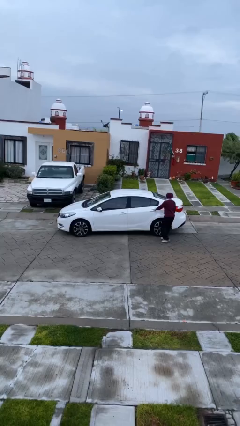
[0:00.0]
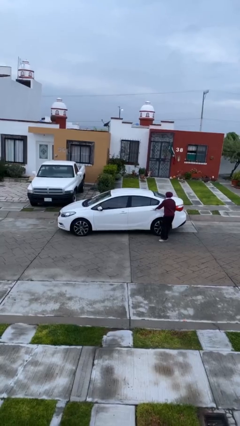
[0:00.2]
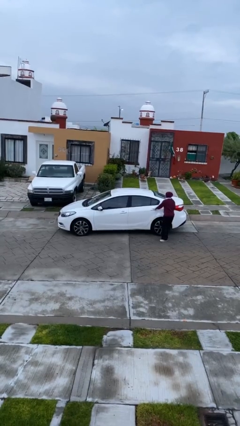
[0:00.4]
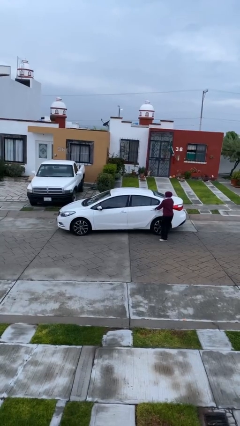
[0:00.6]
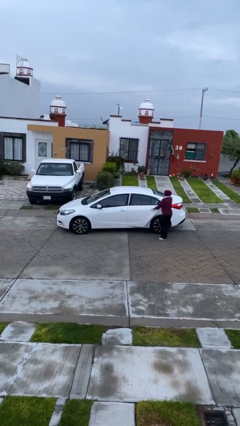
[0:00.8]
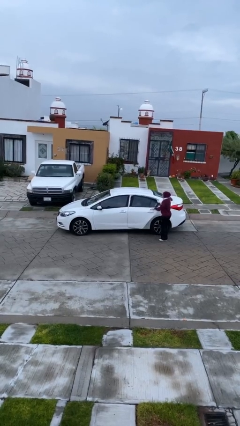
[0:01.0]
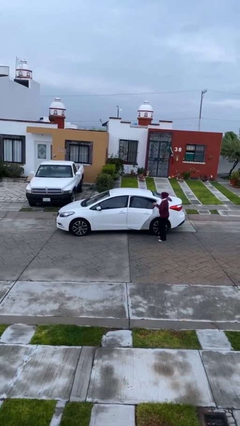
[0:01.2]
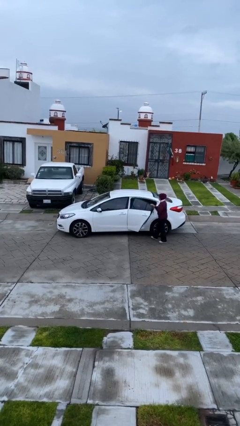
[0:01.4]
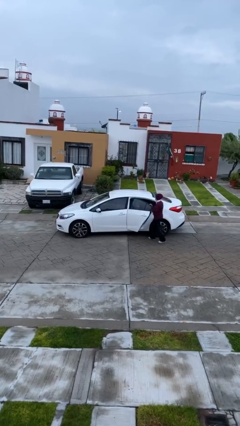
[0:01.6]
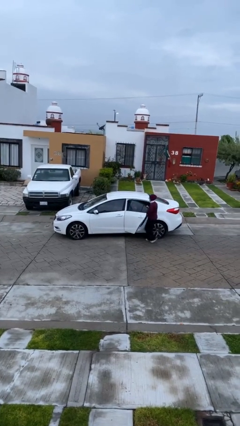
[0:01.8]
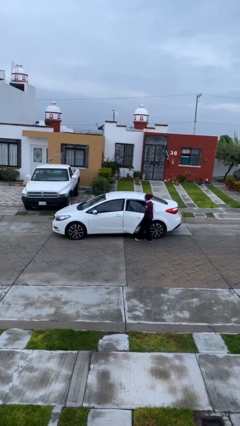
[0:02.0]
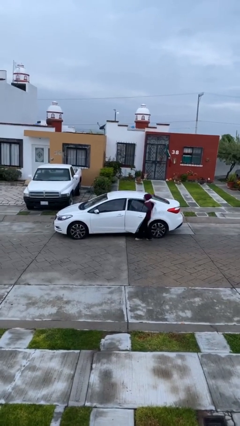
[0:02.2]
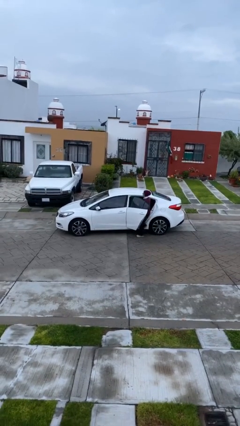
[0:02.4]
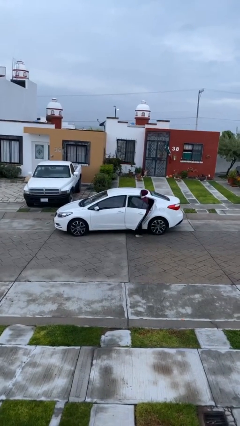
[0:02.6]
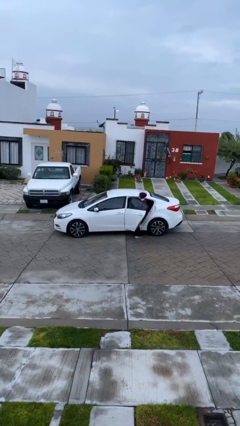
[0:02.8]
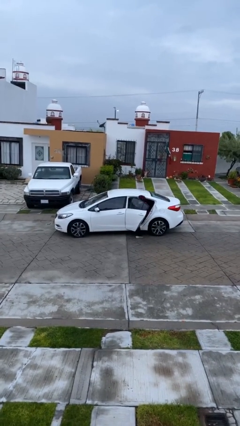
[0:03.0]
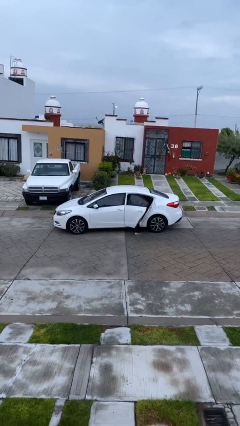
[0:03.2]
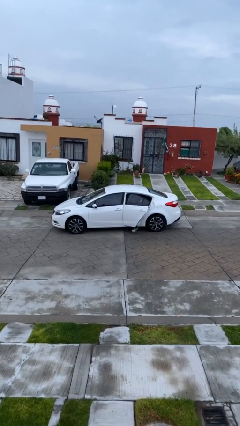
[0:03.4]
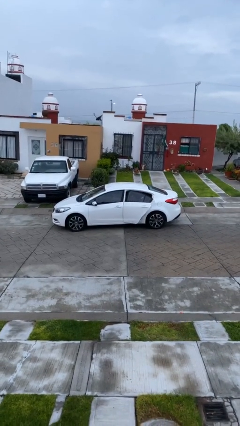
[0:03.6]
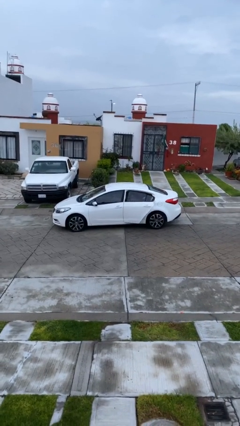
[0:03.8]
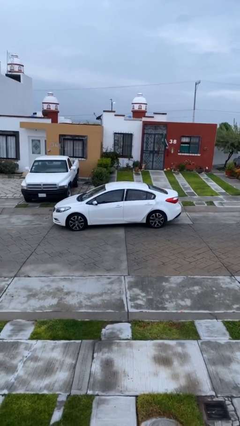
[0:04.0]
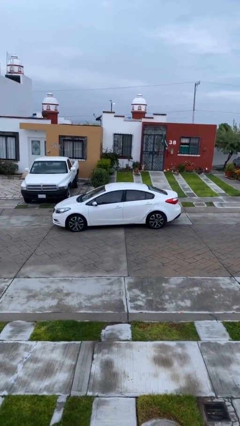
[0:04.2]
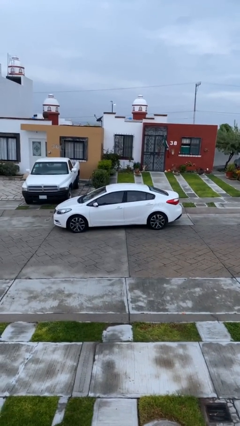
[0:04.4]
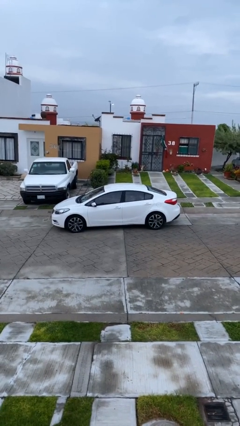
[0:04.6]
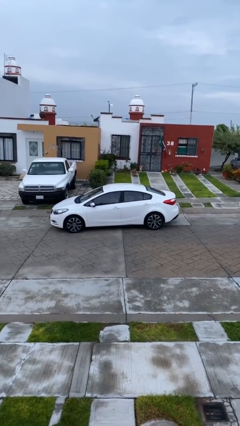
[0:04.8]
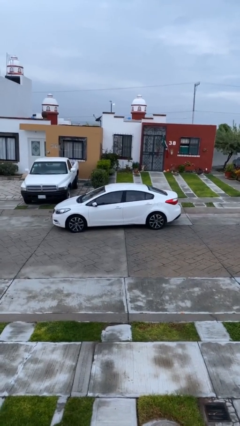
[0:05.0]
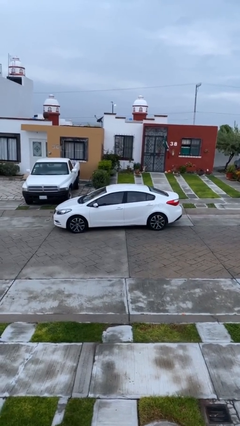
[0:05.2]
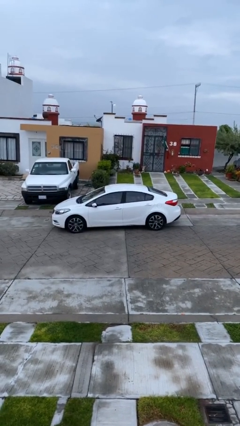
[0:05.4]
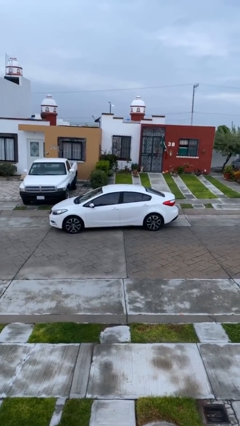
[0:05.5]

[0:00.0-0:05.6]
car picks up person

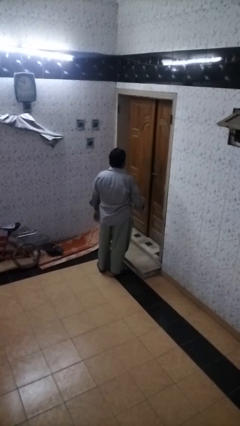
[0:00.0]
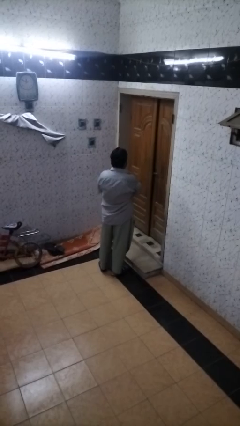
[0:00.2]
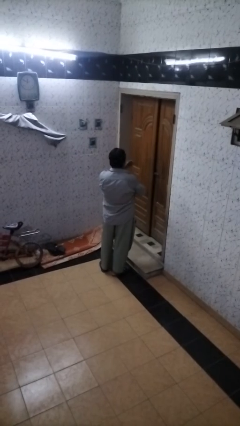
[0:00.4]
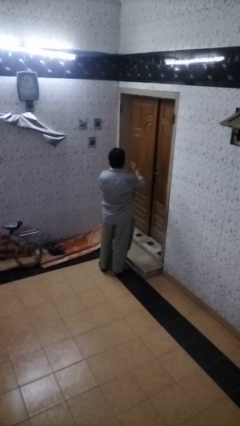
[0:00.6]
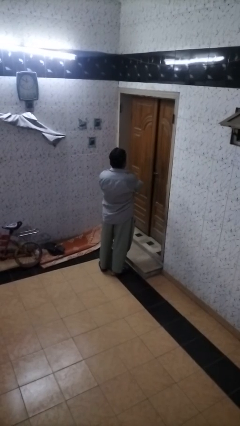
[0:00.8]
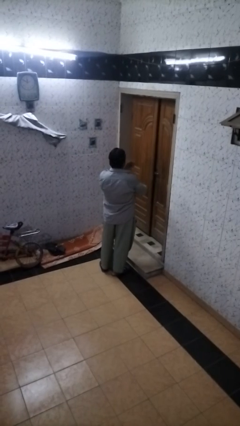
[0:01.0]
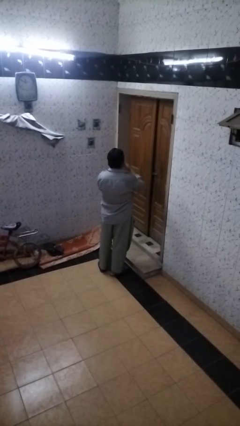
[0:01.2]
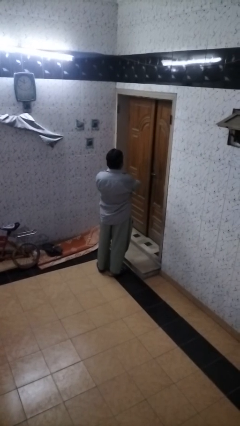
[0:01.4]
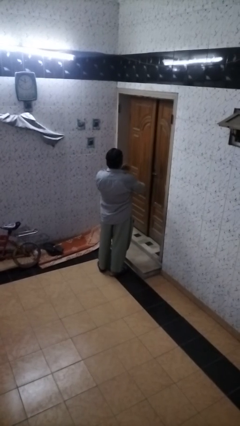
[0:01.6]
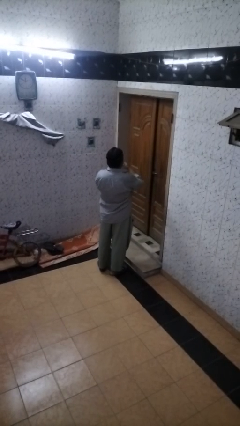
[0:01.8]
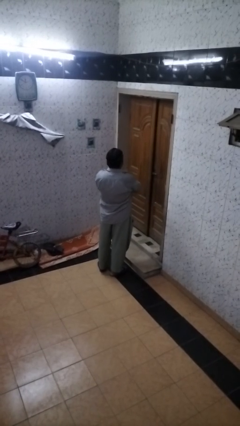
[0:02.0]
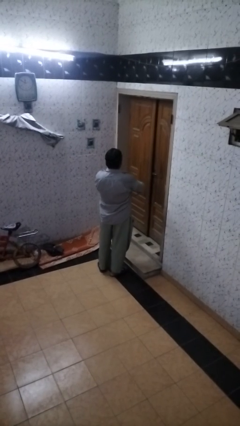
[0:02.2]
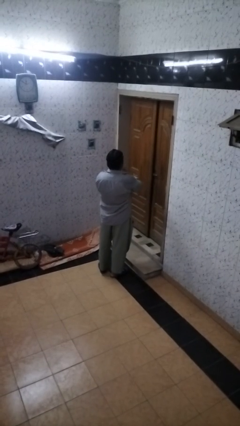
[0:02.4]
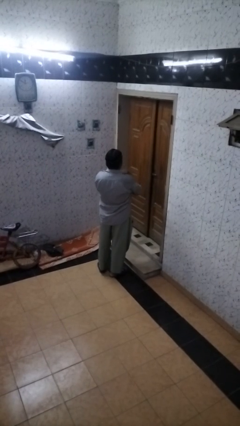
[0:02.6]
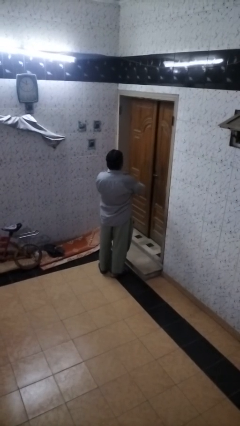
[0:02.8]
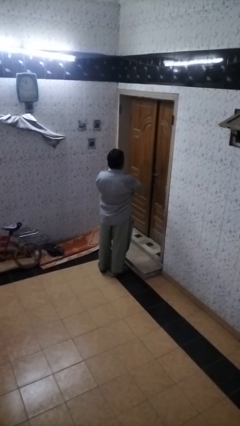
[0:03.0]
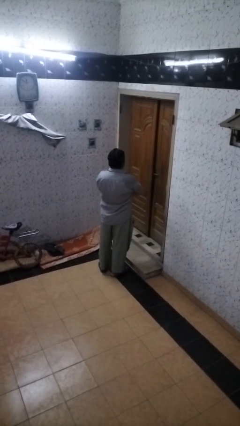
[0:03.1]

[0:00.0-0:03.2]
person drums on chest

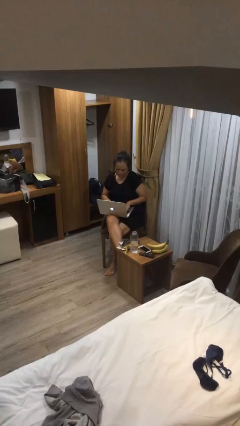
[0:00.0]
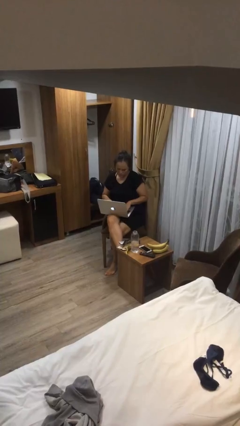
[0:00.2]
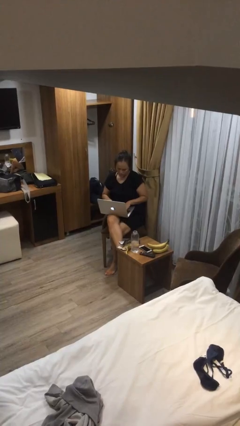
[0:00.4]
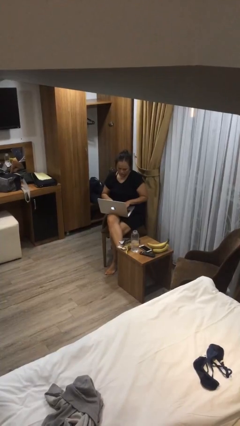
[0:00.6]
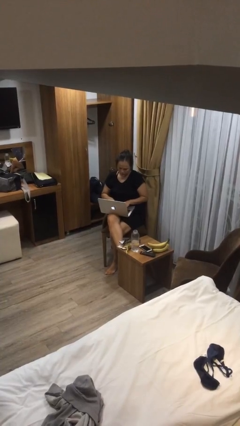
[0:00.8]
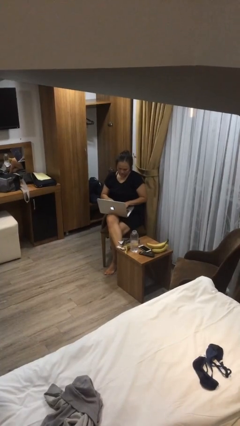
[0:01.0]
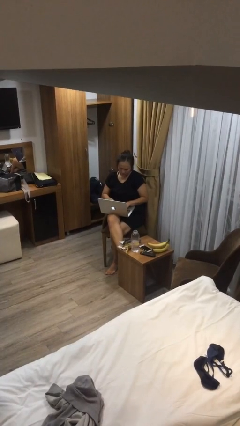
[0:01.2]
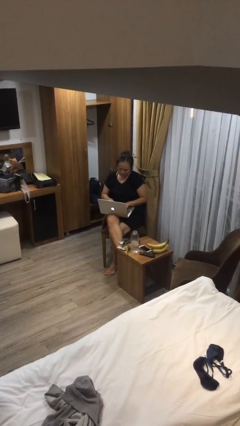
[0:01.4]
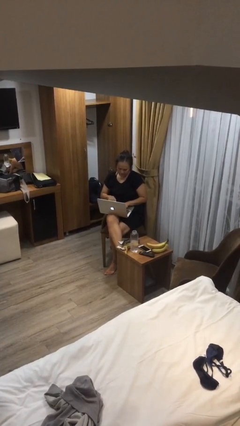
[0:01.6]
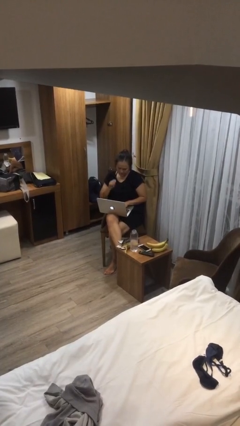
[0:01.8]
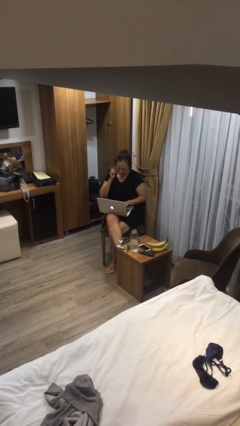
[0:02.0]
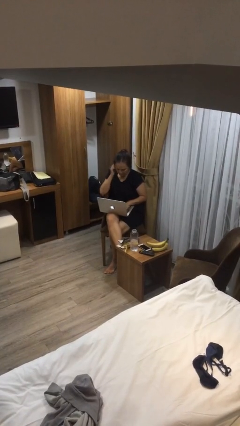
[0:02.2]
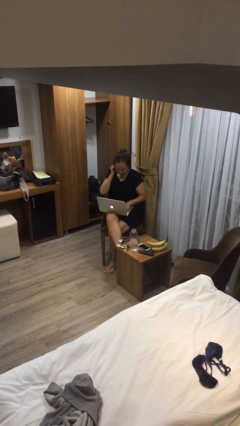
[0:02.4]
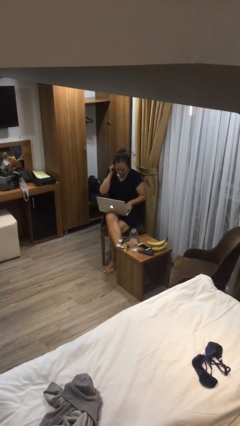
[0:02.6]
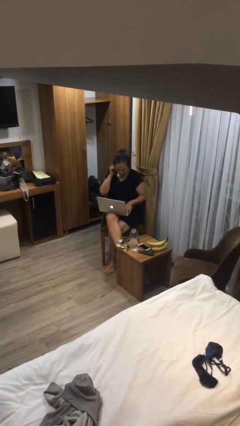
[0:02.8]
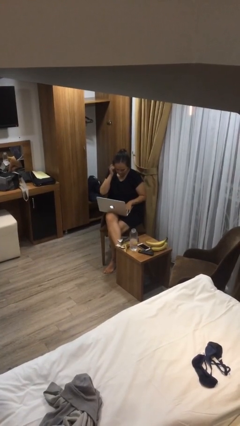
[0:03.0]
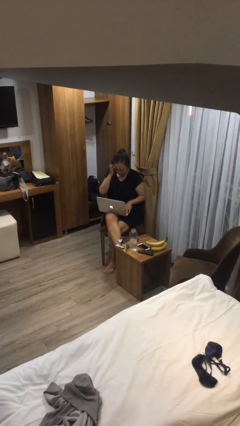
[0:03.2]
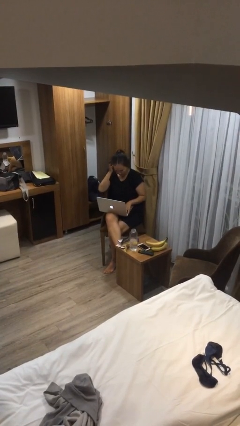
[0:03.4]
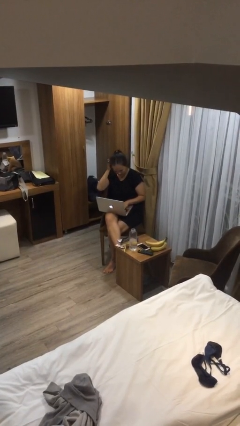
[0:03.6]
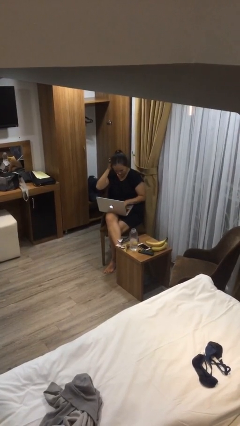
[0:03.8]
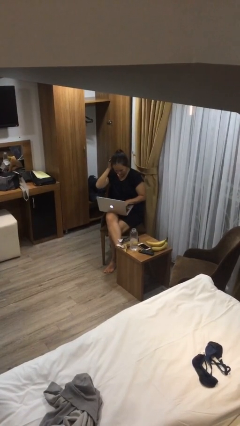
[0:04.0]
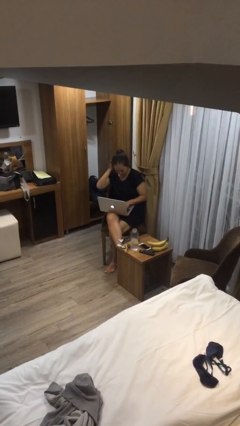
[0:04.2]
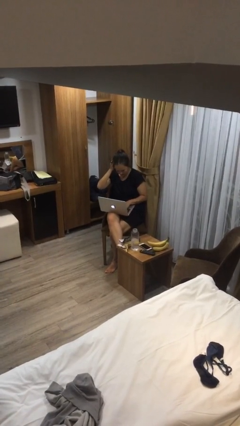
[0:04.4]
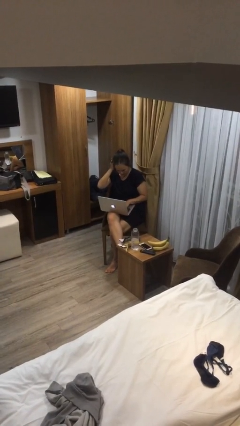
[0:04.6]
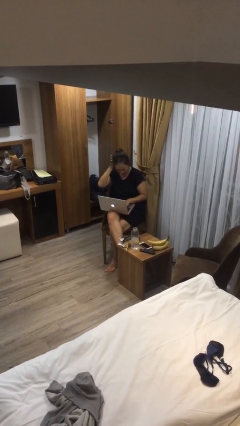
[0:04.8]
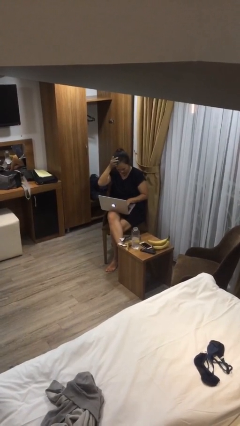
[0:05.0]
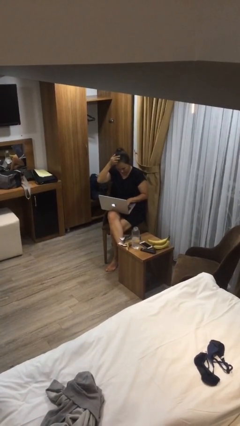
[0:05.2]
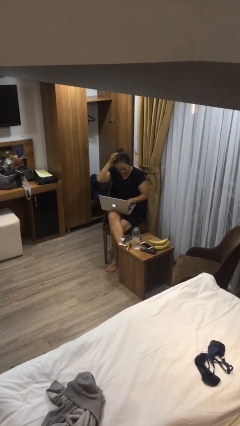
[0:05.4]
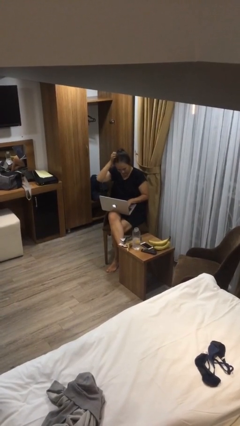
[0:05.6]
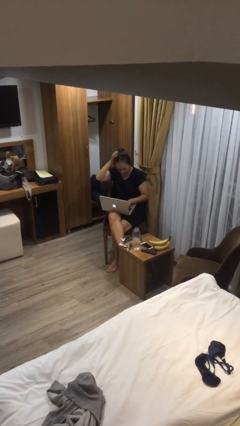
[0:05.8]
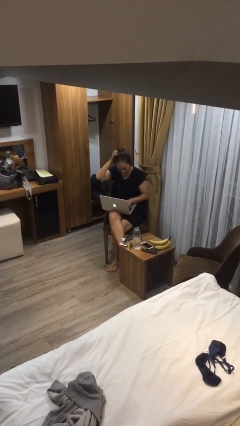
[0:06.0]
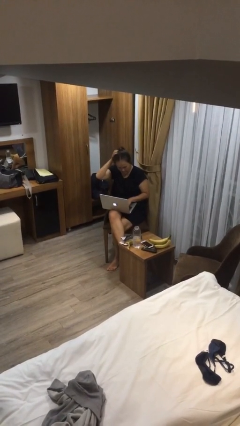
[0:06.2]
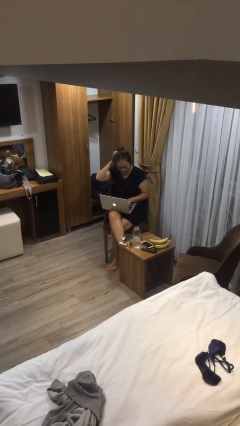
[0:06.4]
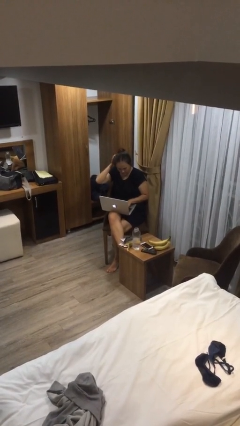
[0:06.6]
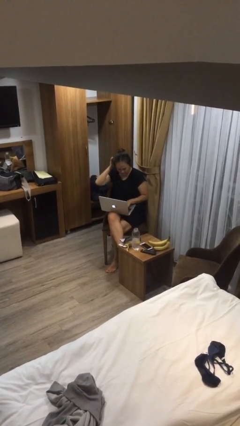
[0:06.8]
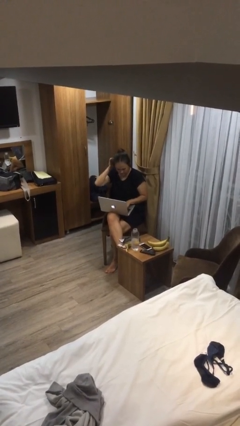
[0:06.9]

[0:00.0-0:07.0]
person interacts with laptop

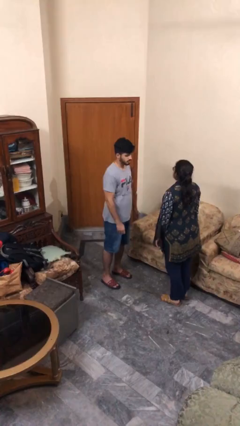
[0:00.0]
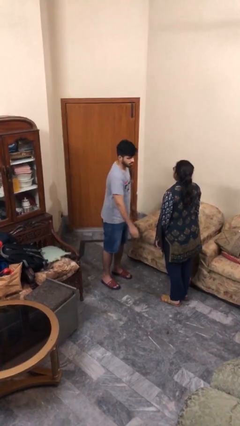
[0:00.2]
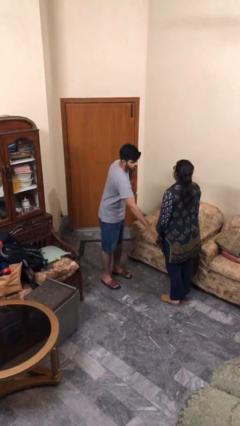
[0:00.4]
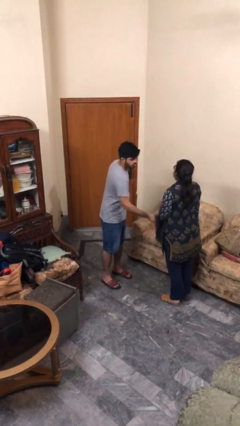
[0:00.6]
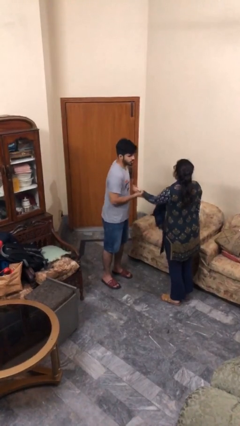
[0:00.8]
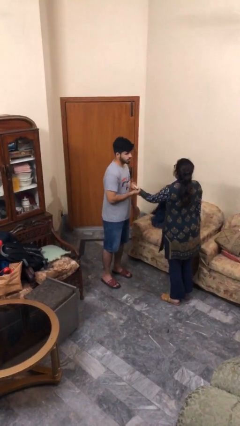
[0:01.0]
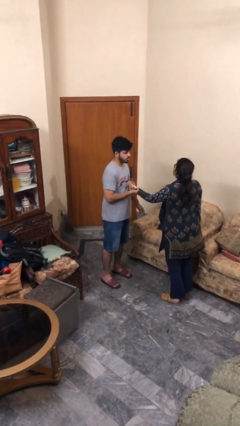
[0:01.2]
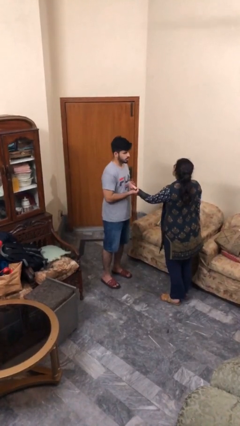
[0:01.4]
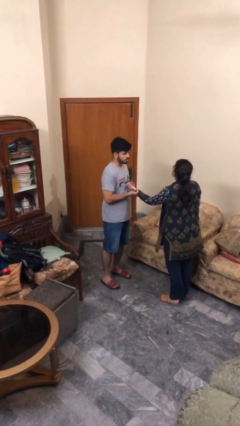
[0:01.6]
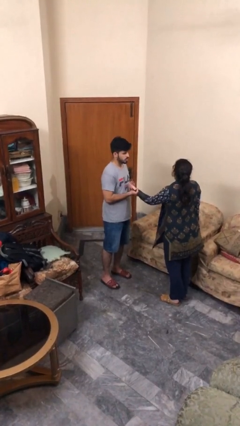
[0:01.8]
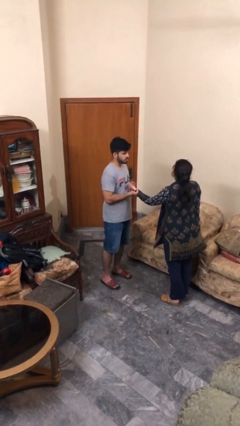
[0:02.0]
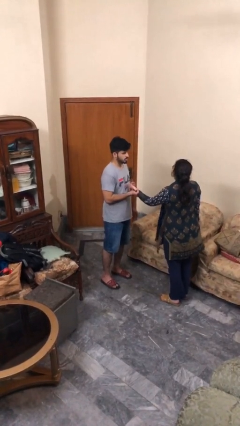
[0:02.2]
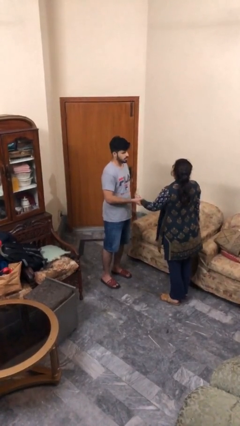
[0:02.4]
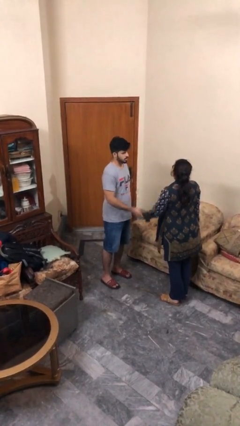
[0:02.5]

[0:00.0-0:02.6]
person grabs person by forearm
